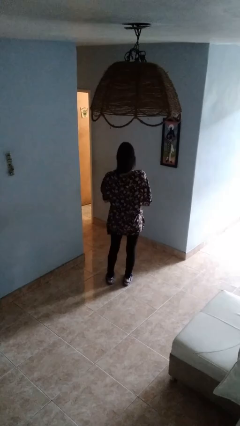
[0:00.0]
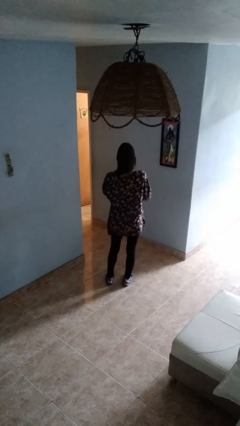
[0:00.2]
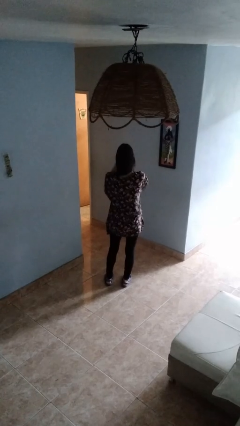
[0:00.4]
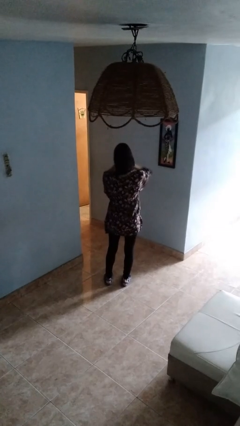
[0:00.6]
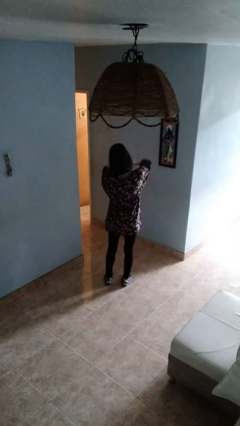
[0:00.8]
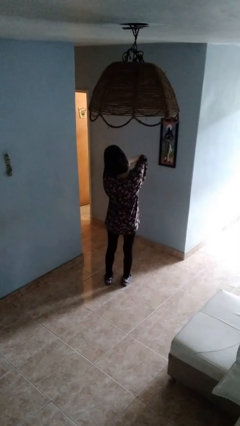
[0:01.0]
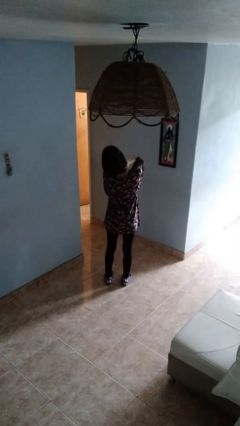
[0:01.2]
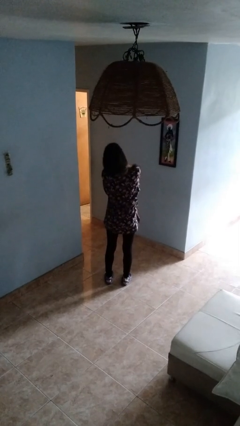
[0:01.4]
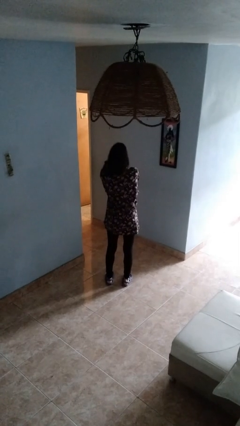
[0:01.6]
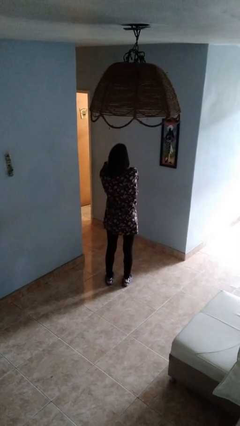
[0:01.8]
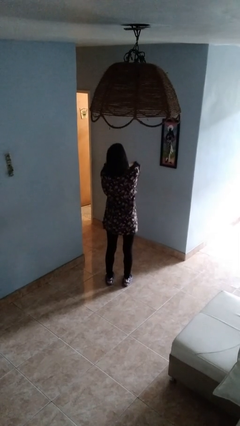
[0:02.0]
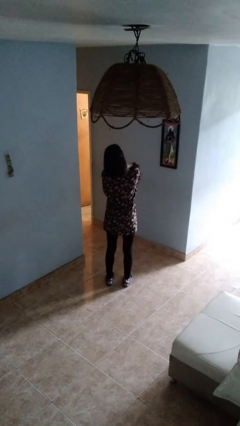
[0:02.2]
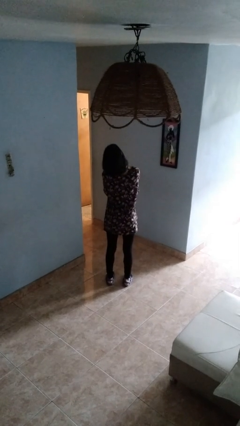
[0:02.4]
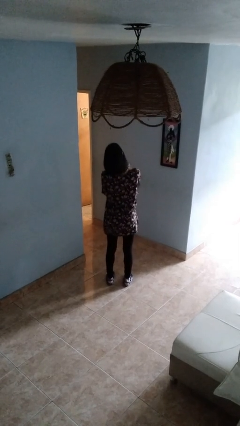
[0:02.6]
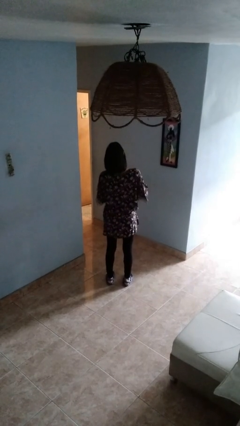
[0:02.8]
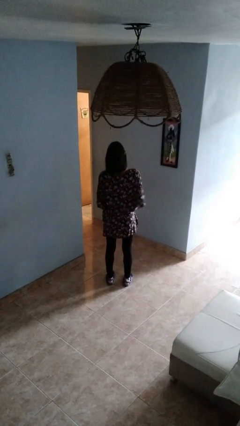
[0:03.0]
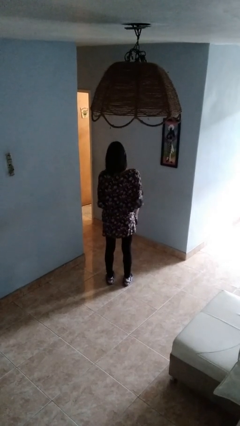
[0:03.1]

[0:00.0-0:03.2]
person rubs neck

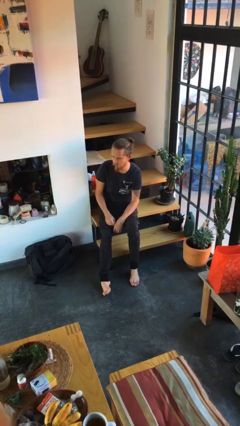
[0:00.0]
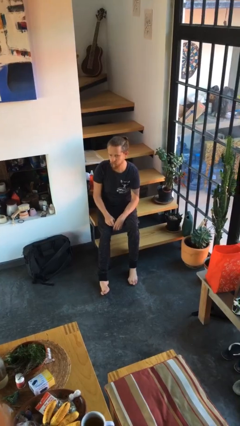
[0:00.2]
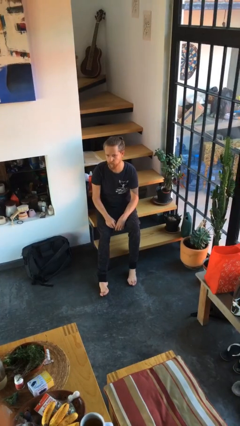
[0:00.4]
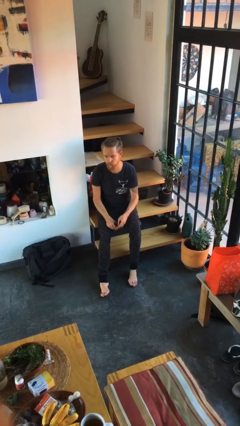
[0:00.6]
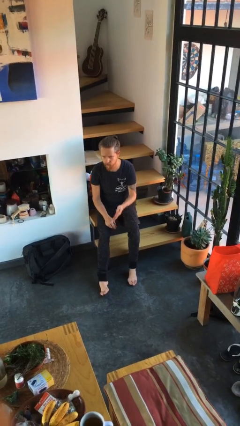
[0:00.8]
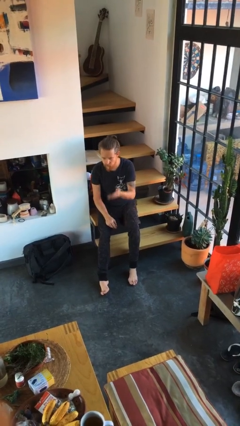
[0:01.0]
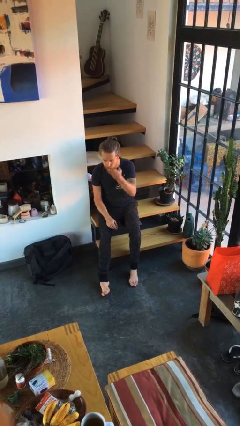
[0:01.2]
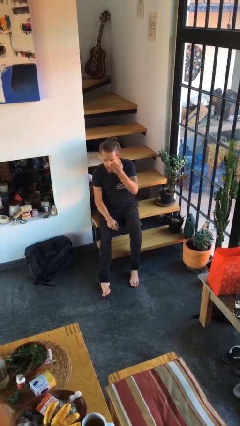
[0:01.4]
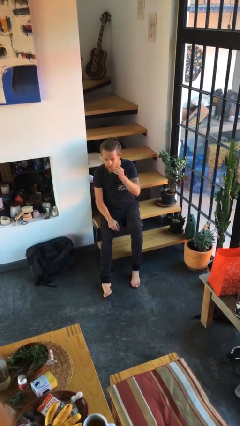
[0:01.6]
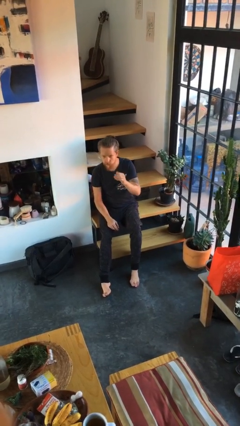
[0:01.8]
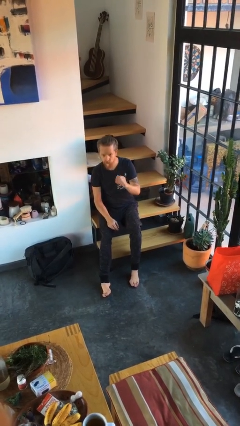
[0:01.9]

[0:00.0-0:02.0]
person gestures swipe up

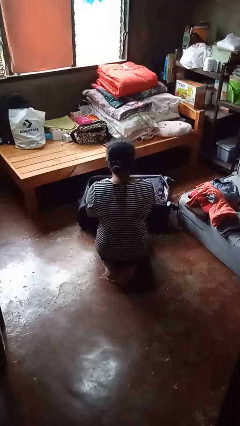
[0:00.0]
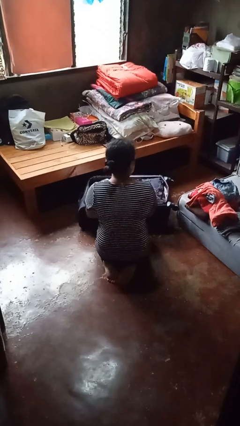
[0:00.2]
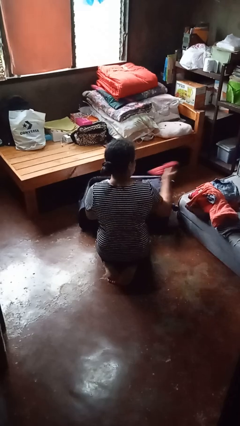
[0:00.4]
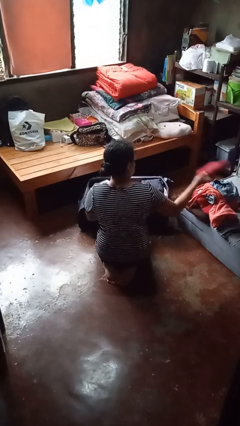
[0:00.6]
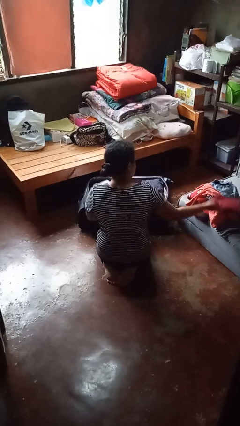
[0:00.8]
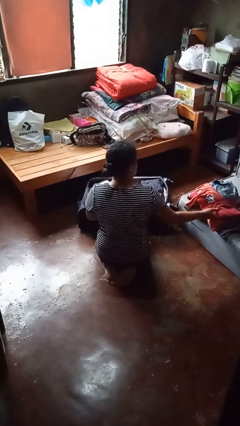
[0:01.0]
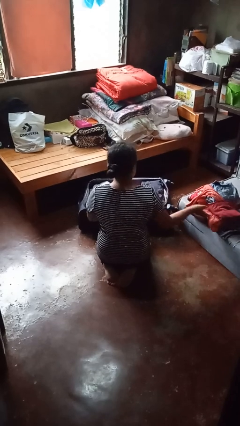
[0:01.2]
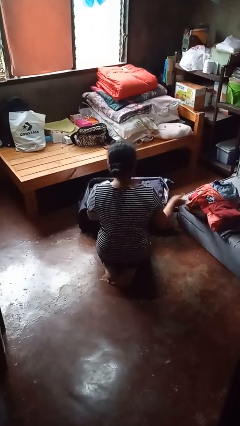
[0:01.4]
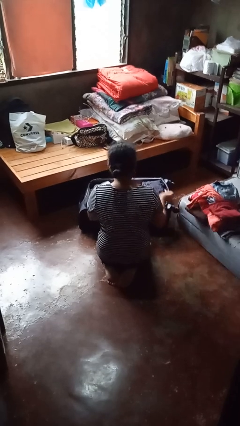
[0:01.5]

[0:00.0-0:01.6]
person unloads clothes from suitcase

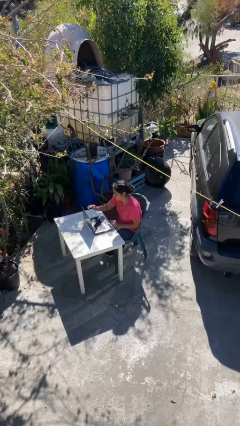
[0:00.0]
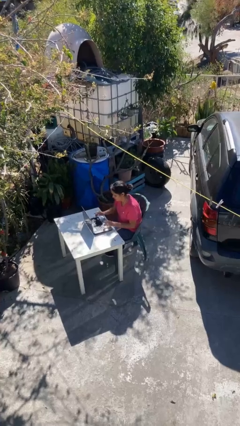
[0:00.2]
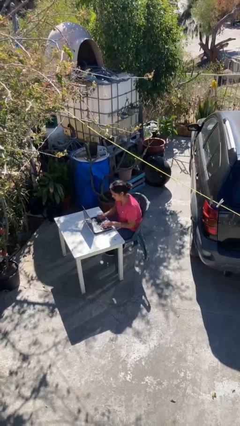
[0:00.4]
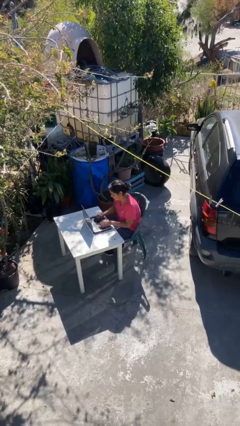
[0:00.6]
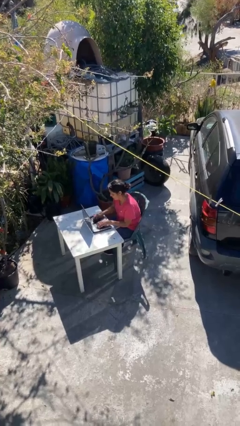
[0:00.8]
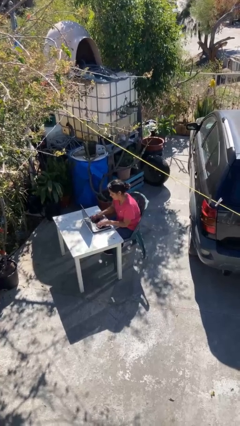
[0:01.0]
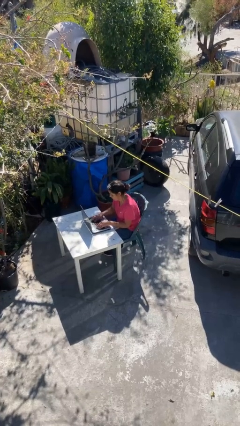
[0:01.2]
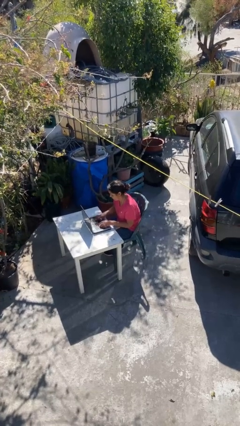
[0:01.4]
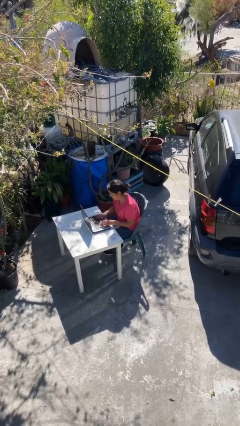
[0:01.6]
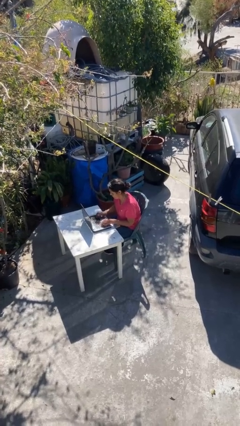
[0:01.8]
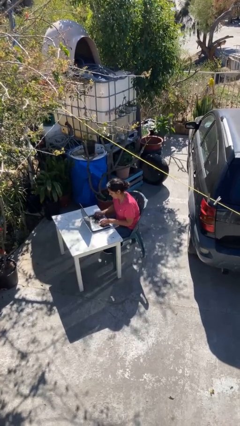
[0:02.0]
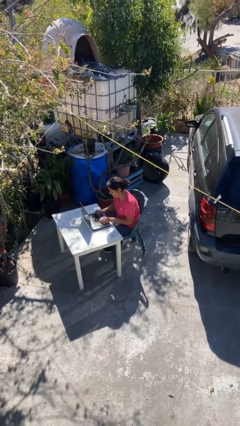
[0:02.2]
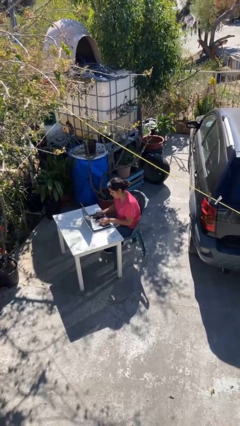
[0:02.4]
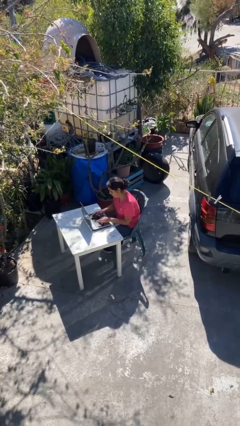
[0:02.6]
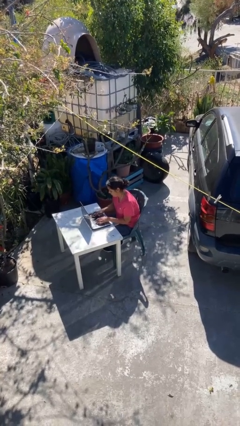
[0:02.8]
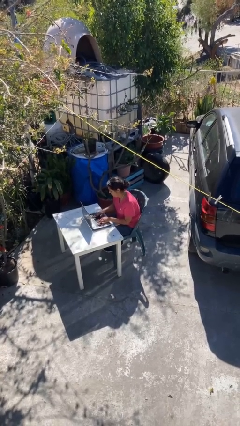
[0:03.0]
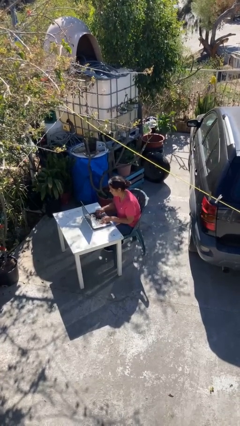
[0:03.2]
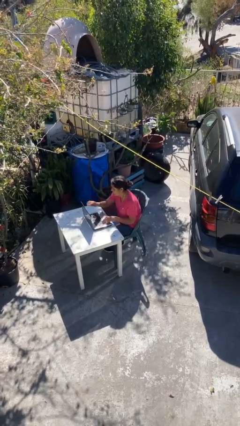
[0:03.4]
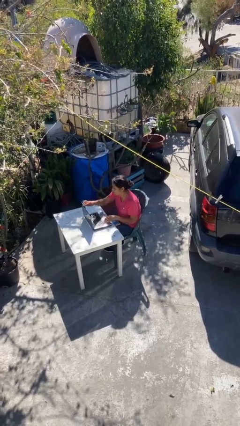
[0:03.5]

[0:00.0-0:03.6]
person interacts with laptop

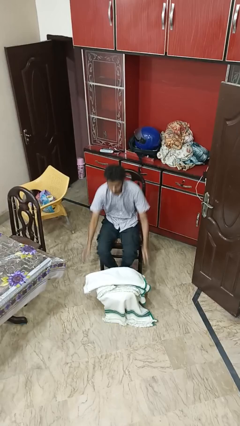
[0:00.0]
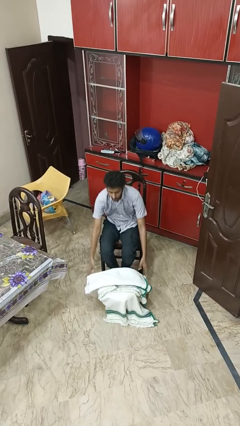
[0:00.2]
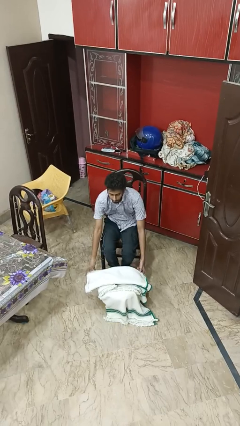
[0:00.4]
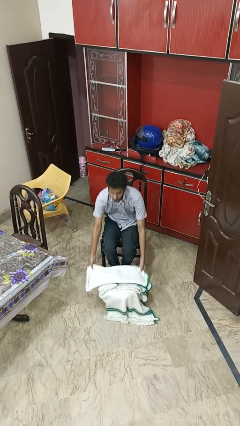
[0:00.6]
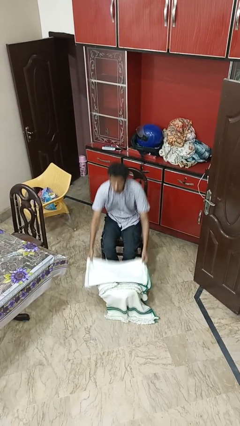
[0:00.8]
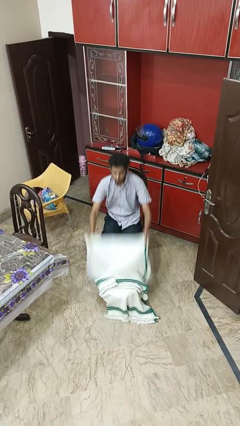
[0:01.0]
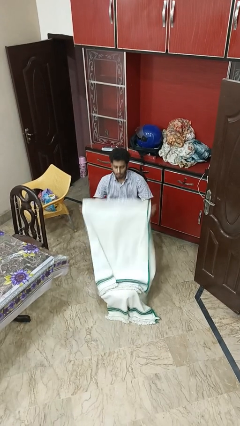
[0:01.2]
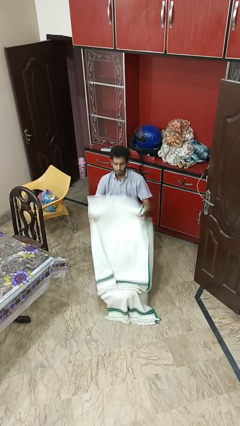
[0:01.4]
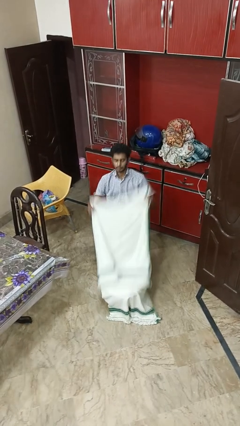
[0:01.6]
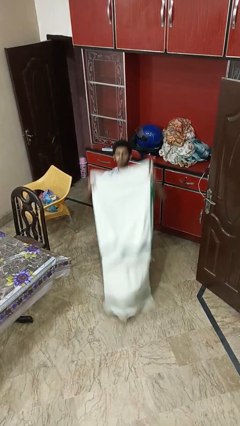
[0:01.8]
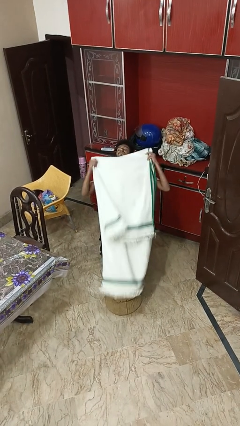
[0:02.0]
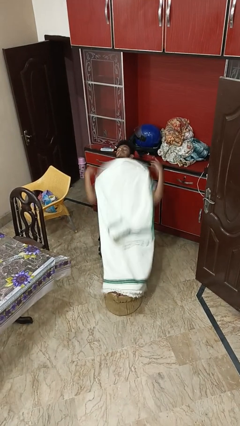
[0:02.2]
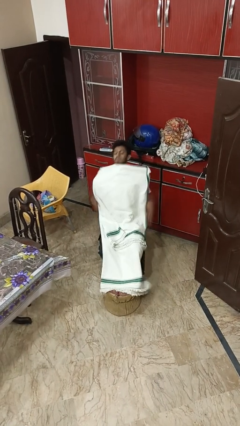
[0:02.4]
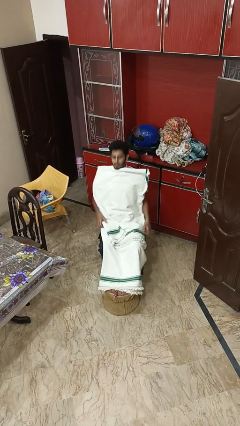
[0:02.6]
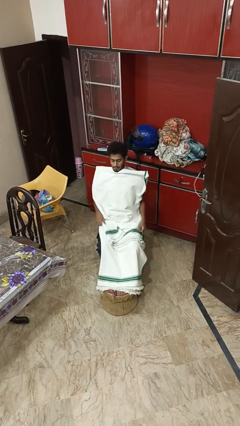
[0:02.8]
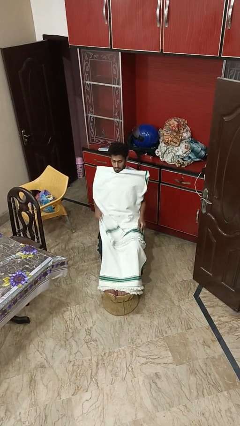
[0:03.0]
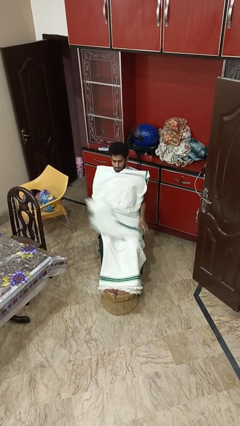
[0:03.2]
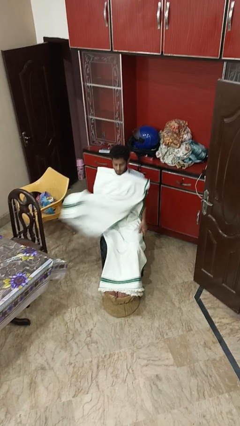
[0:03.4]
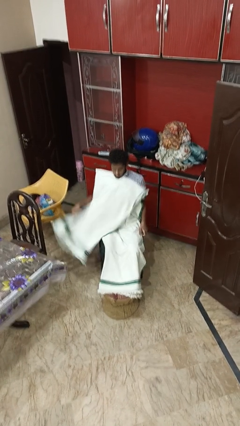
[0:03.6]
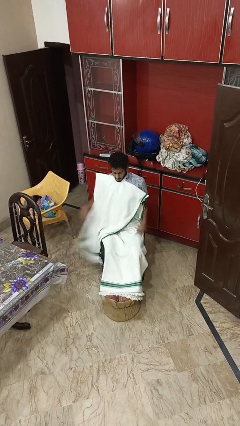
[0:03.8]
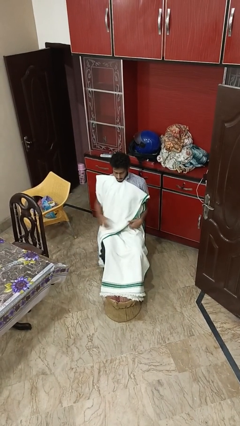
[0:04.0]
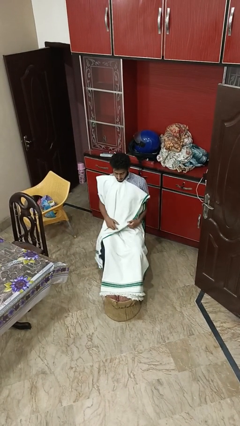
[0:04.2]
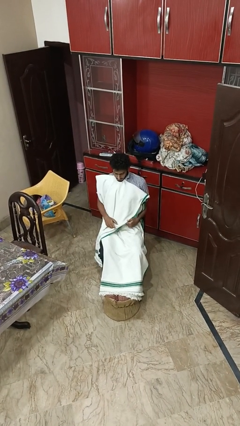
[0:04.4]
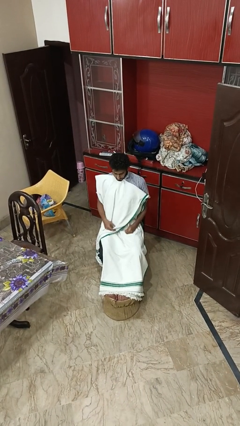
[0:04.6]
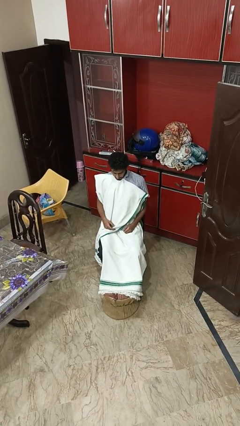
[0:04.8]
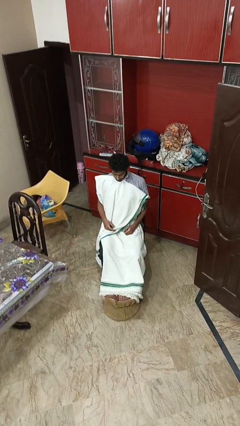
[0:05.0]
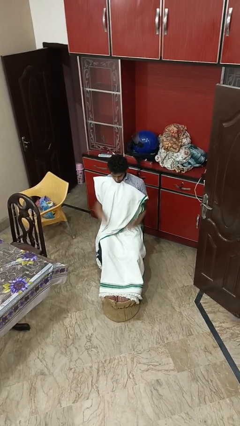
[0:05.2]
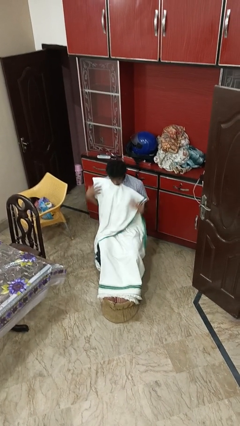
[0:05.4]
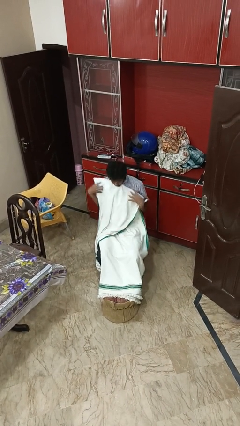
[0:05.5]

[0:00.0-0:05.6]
person covers with blanket

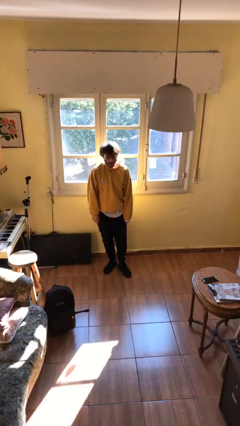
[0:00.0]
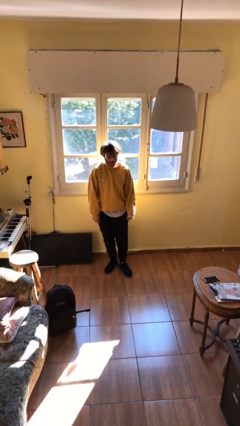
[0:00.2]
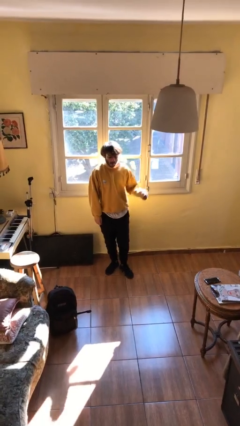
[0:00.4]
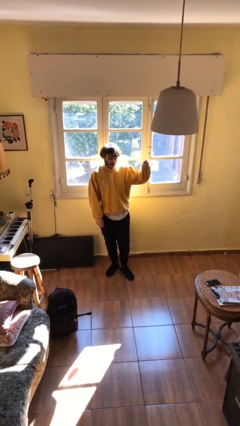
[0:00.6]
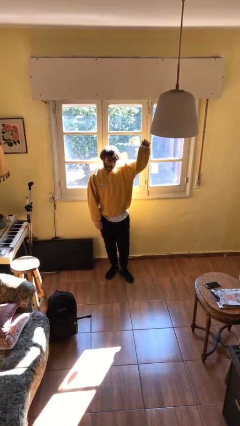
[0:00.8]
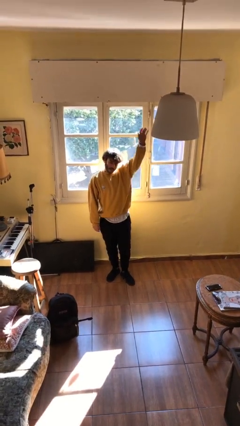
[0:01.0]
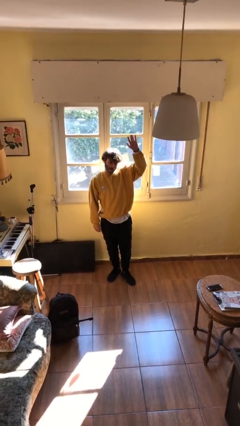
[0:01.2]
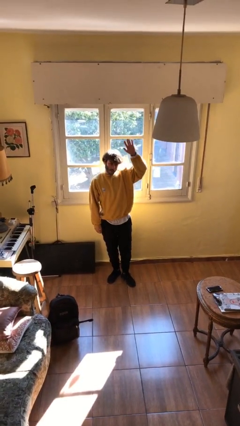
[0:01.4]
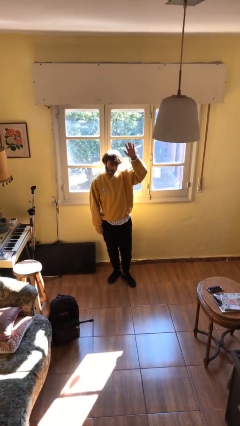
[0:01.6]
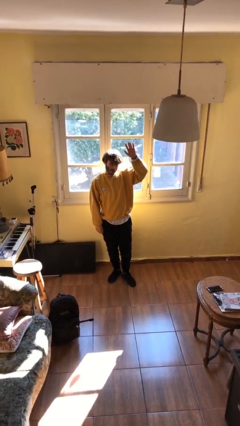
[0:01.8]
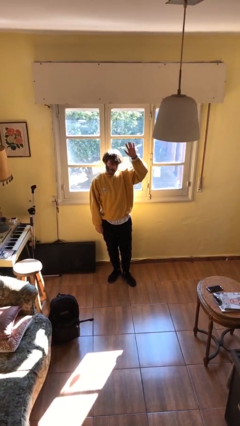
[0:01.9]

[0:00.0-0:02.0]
person gestures raise hand
